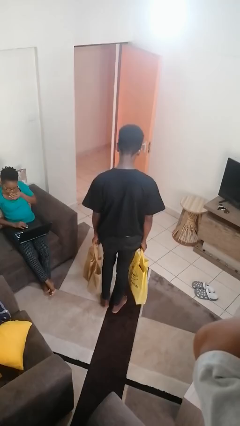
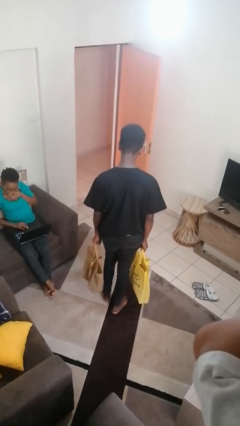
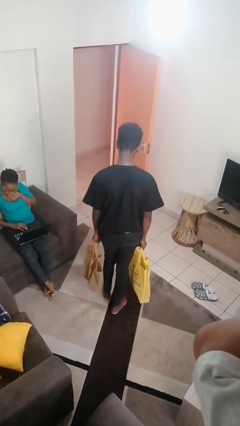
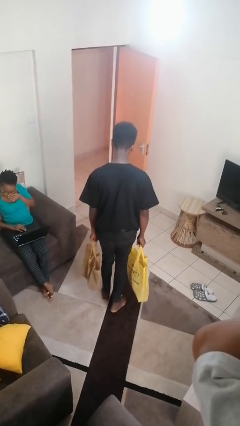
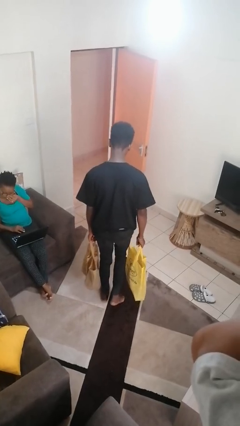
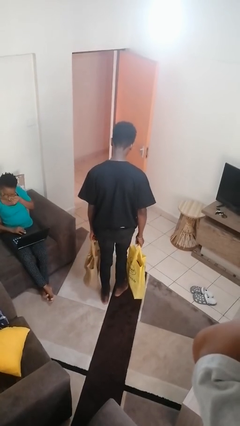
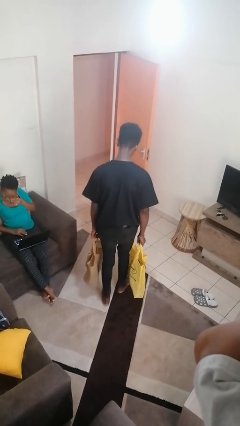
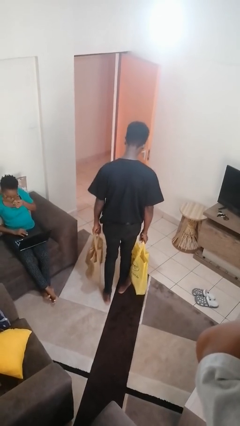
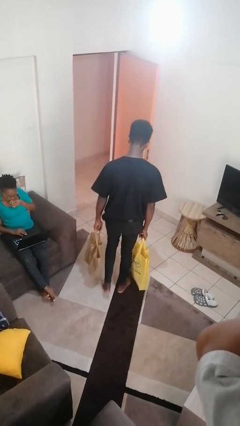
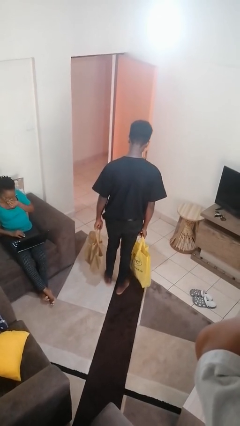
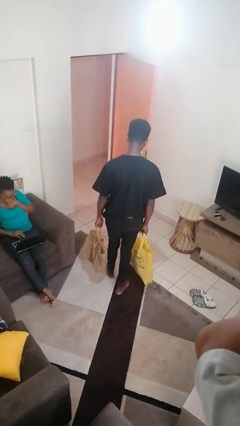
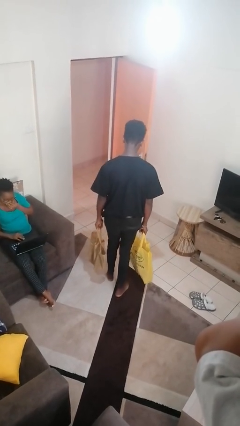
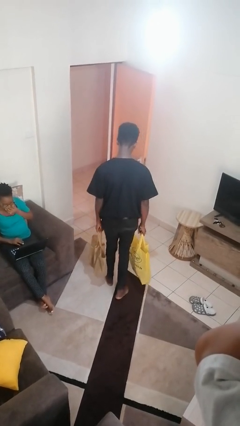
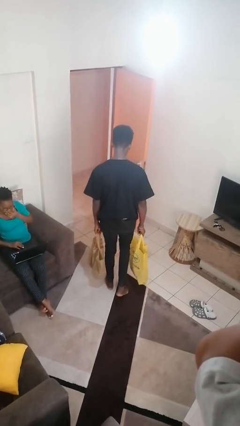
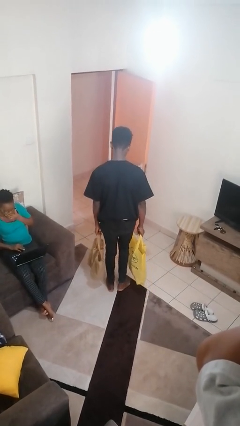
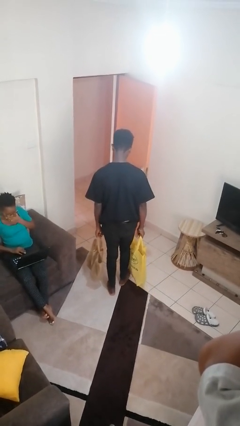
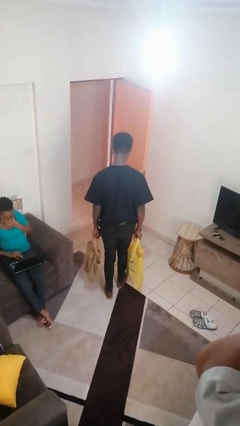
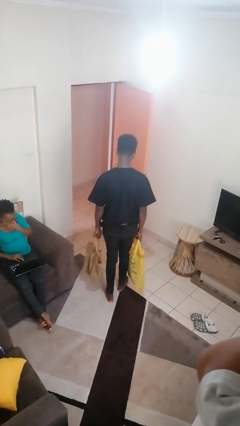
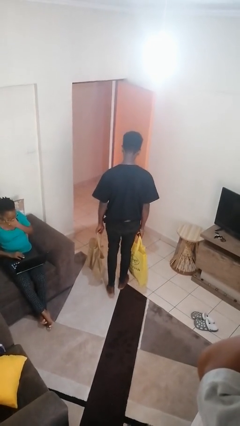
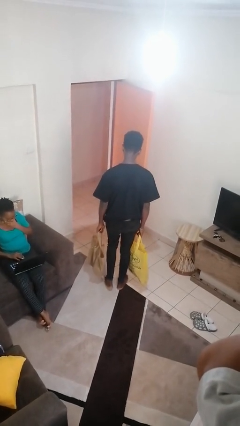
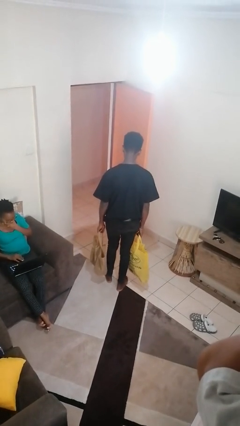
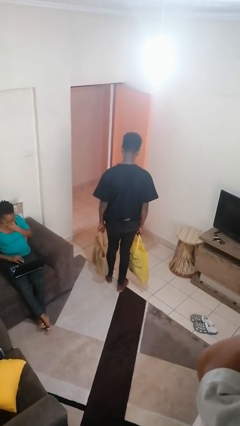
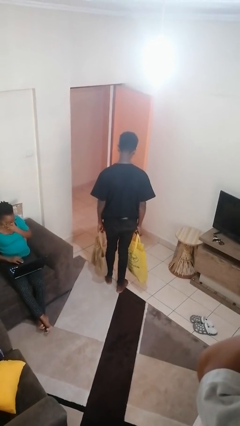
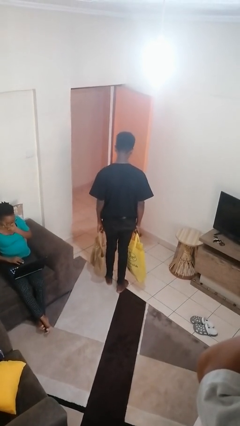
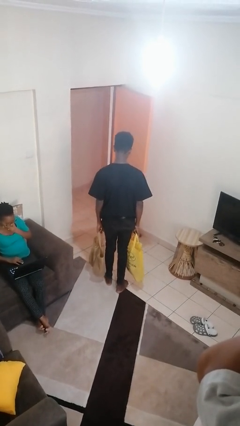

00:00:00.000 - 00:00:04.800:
person carries groceries

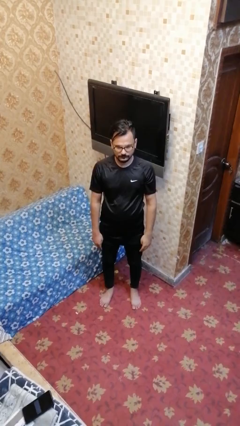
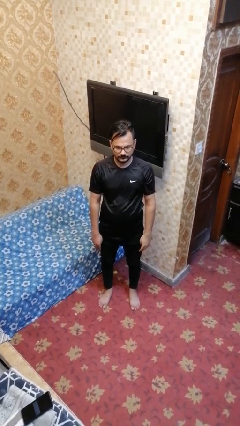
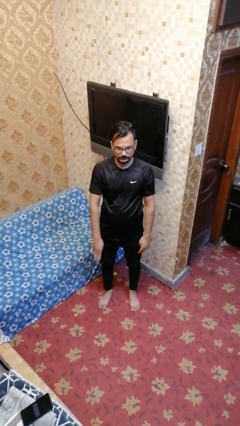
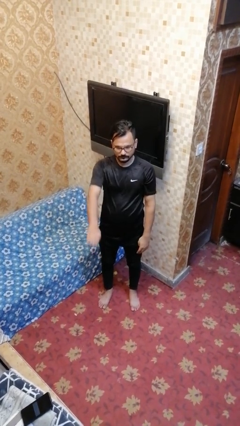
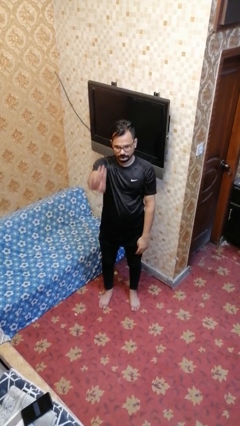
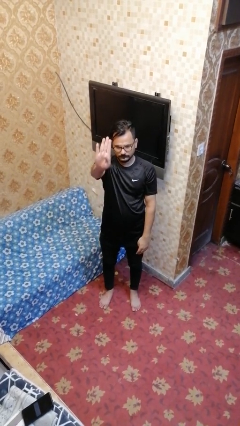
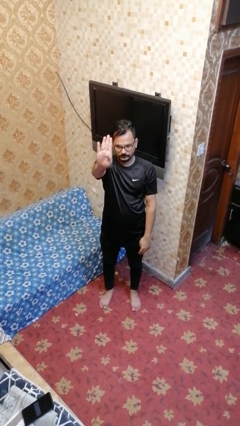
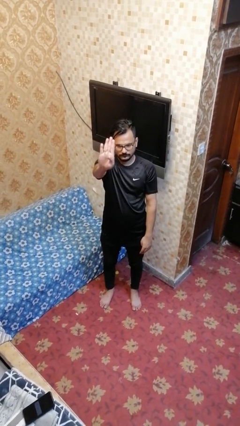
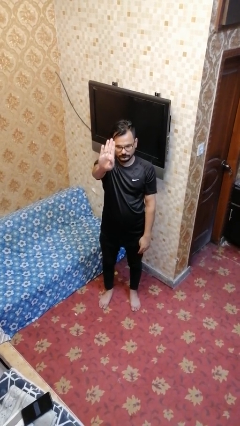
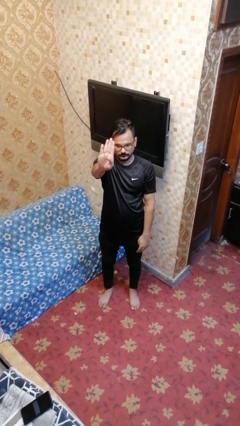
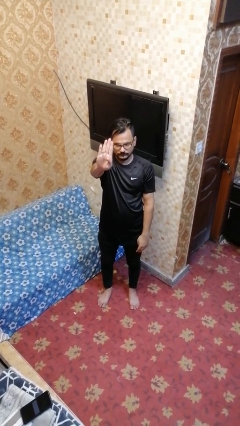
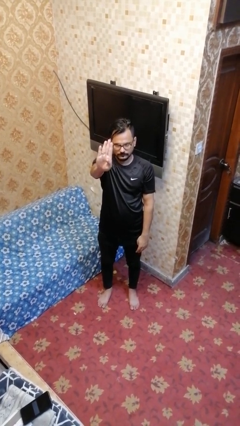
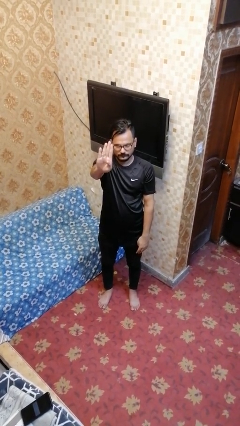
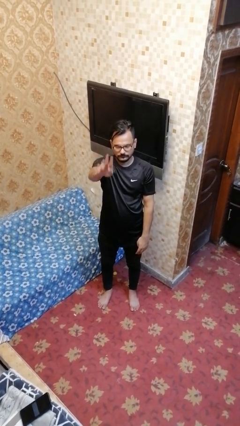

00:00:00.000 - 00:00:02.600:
person gestures number four

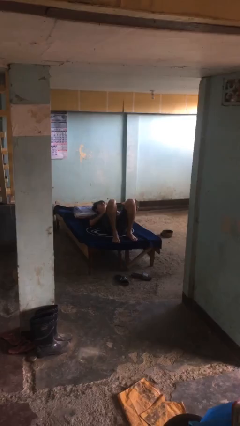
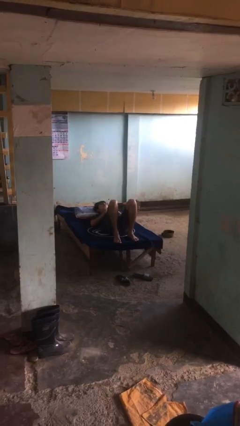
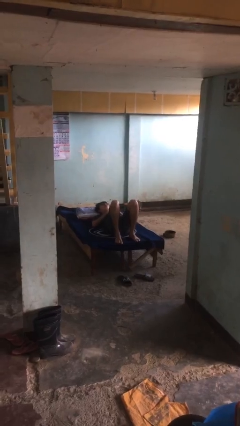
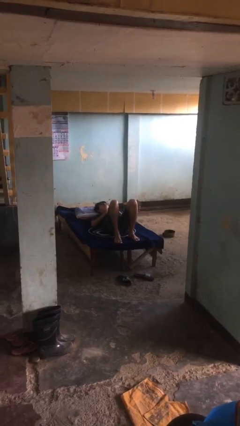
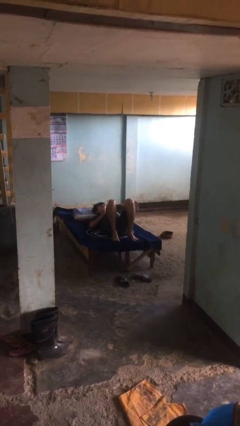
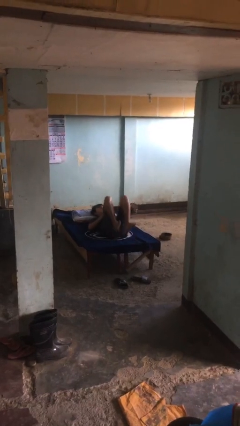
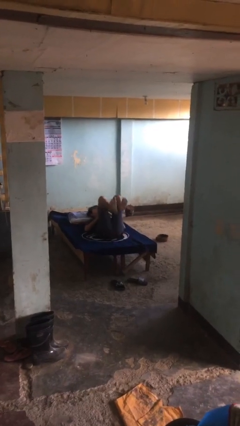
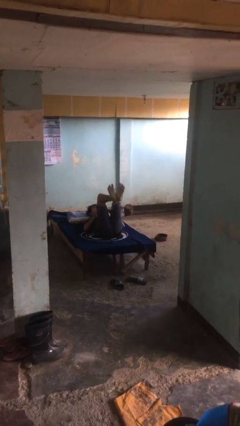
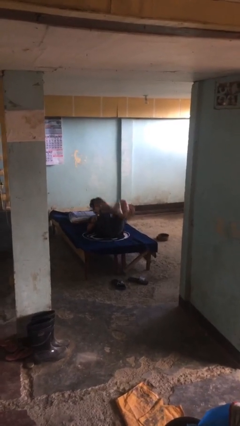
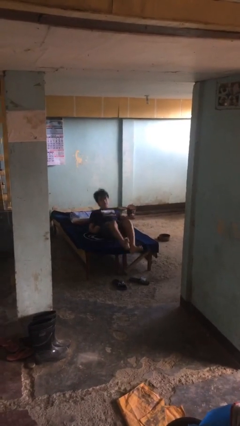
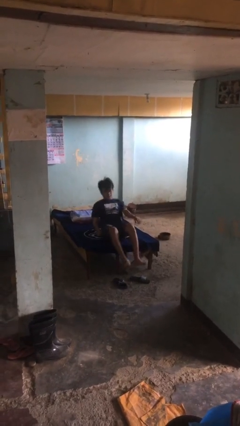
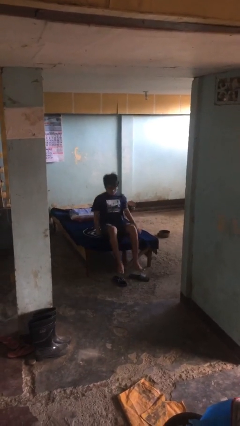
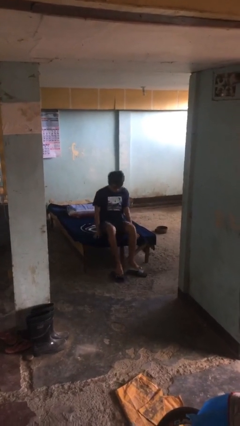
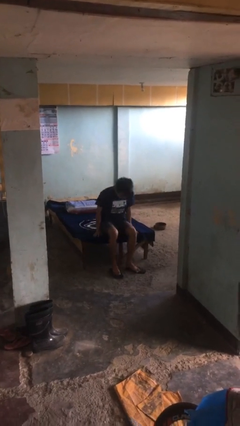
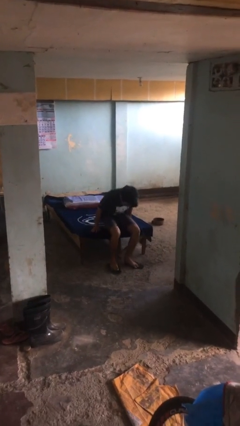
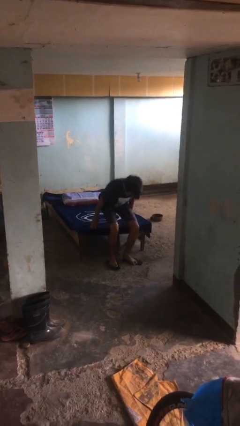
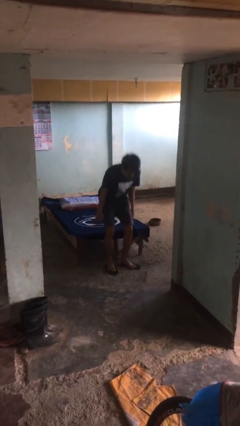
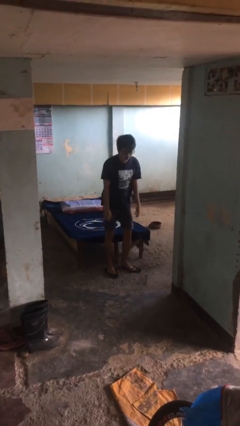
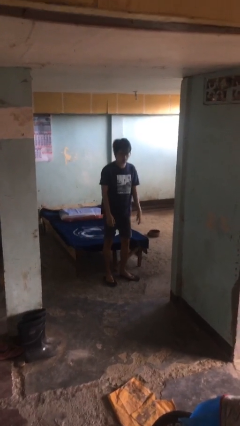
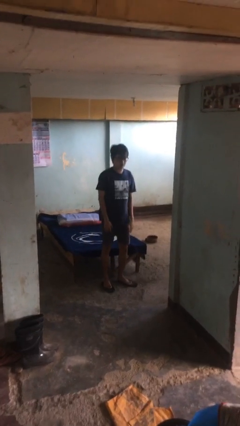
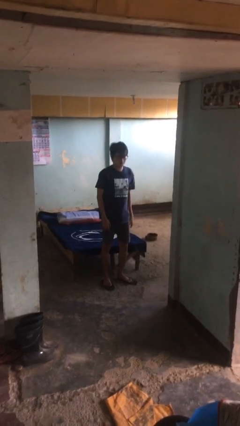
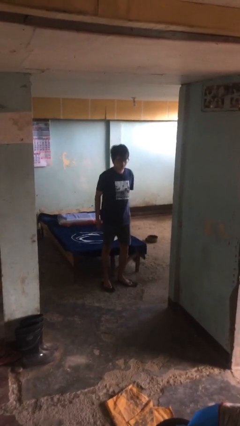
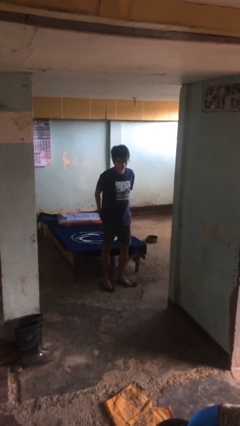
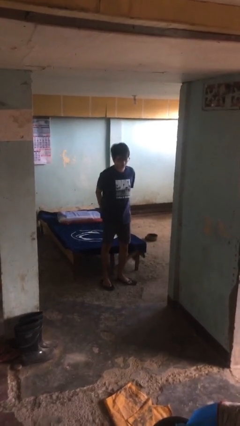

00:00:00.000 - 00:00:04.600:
person stands up

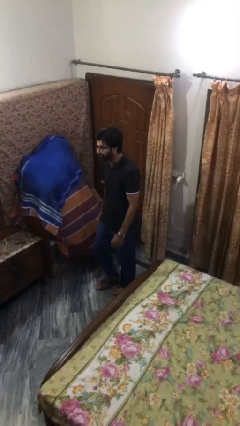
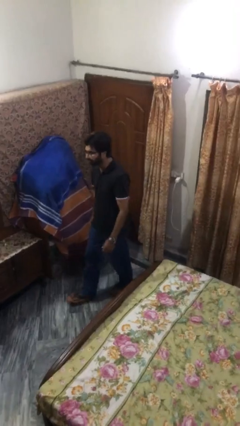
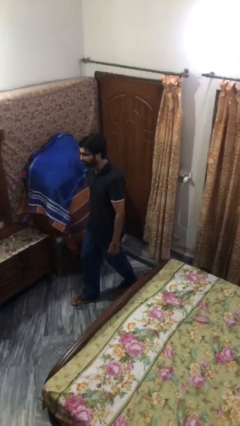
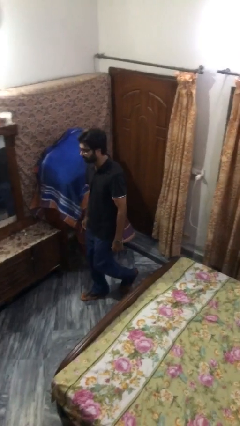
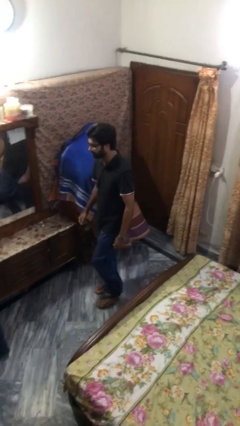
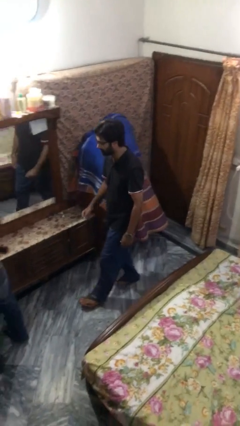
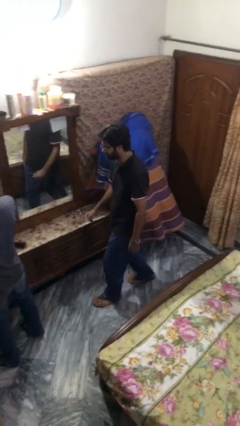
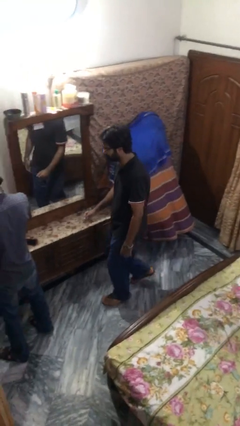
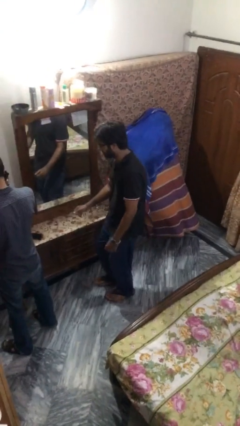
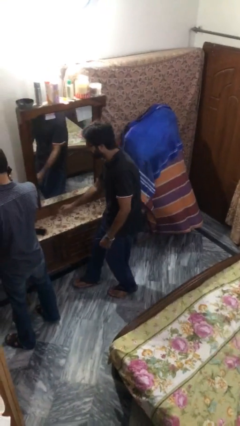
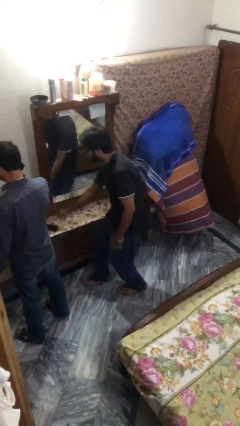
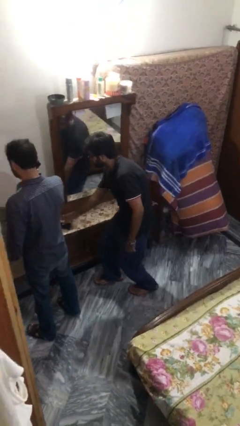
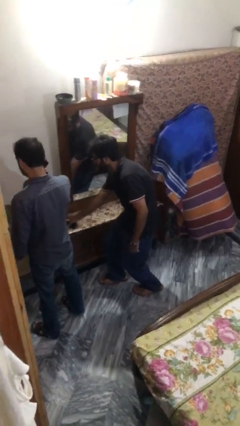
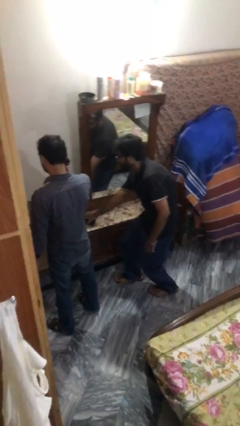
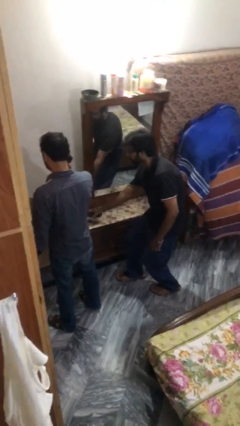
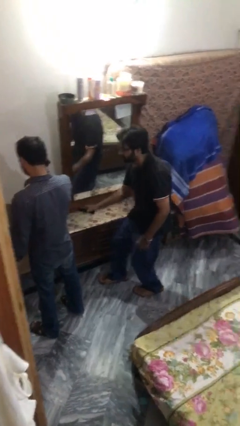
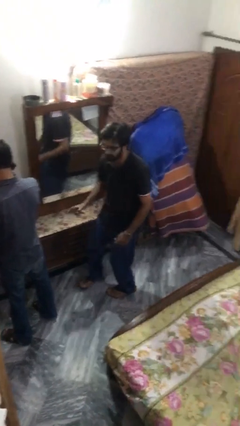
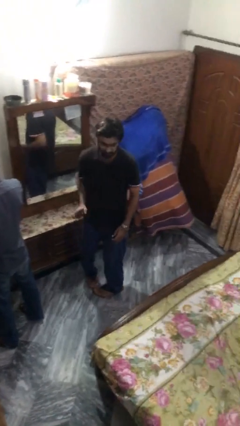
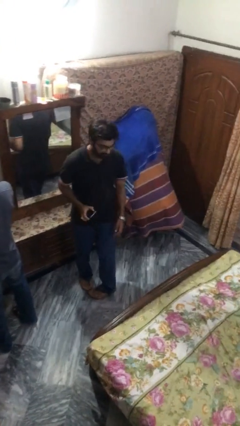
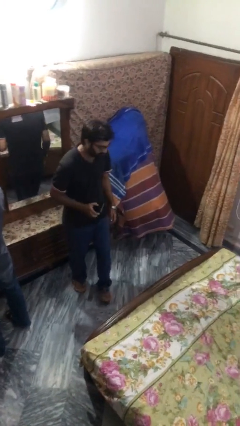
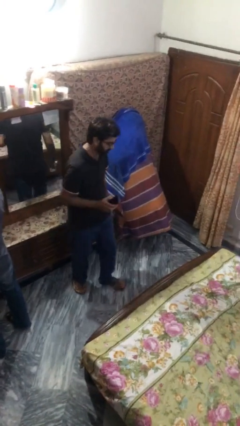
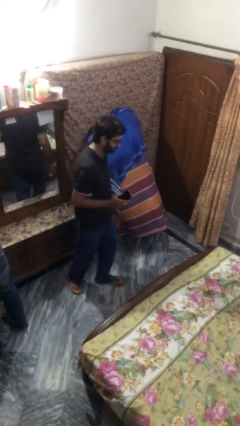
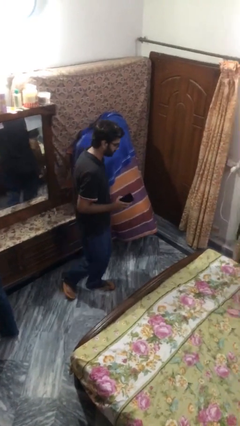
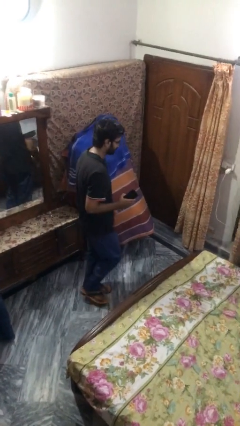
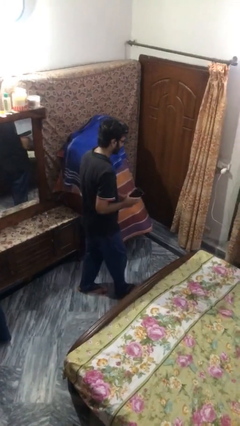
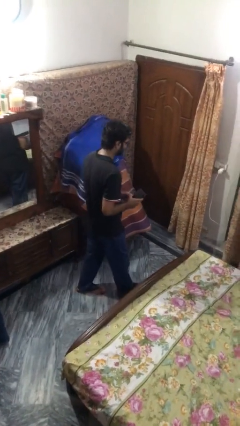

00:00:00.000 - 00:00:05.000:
person steals object from person

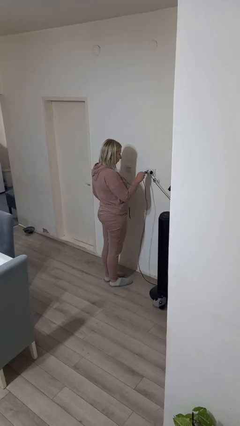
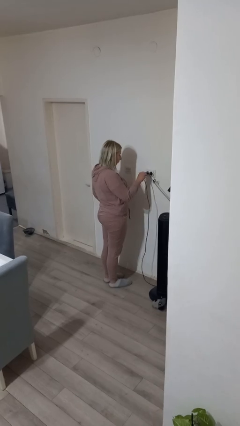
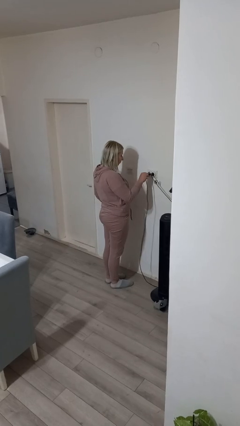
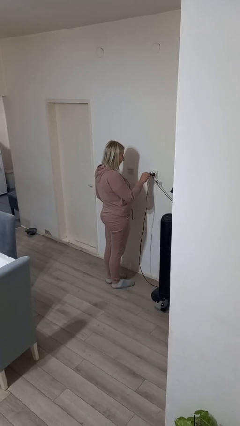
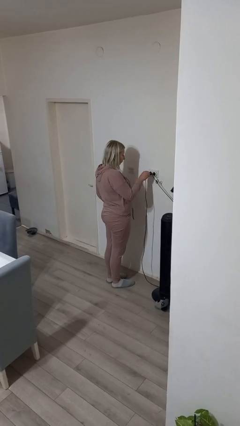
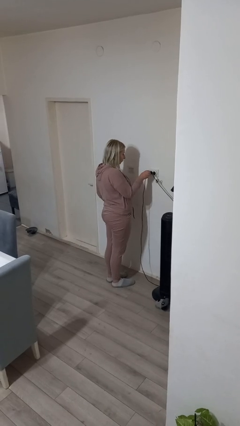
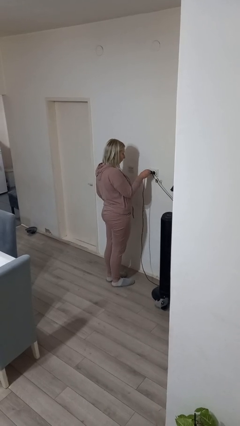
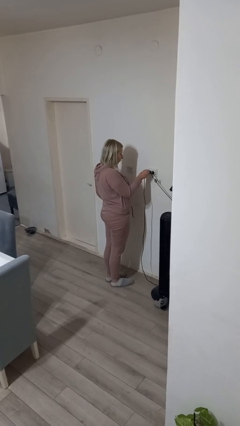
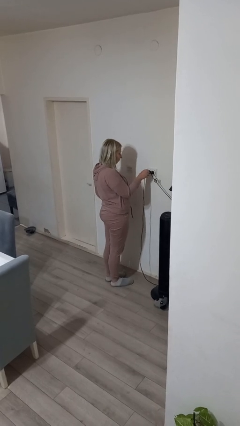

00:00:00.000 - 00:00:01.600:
person plugs into electrical socket
